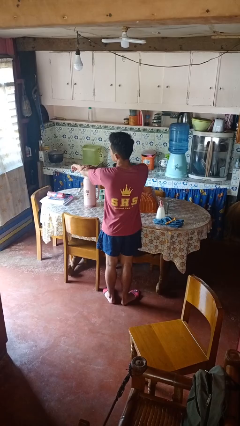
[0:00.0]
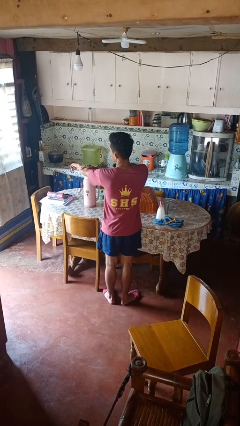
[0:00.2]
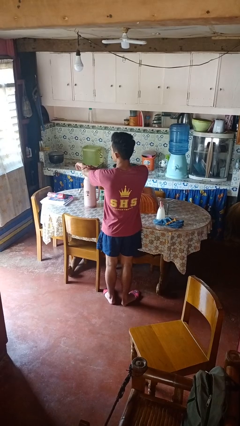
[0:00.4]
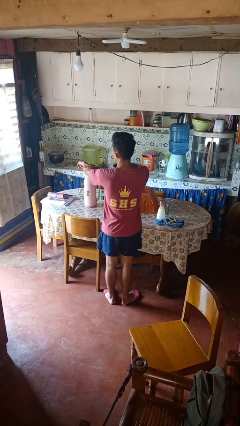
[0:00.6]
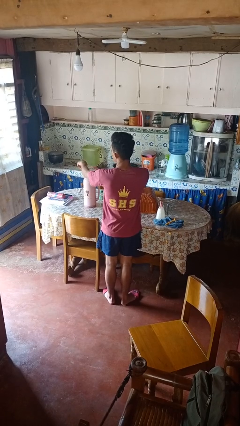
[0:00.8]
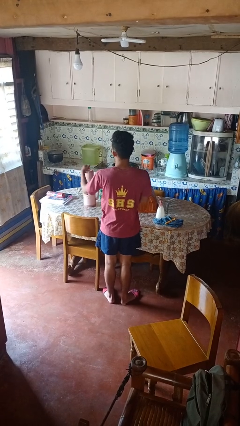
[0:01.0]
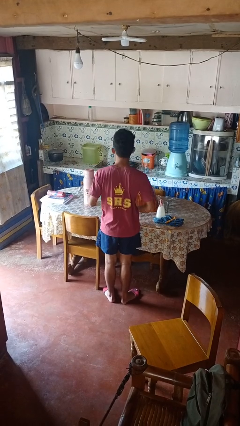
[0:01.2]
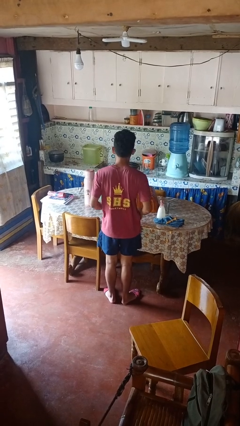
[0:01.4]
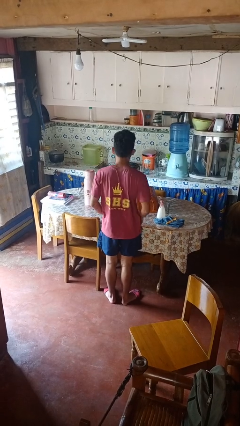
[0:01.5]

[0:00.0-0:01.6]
person swats bug

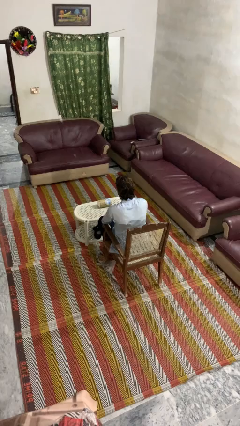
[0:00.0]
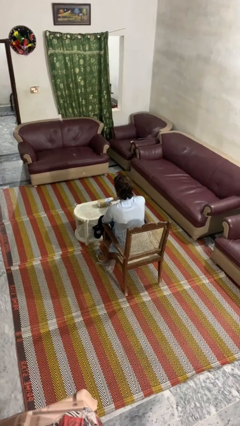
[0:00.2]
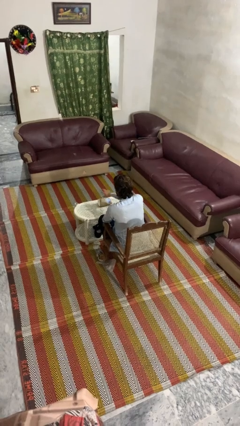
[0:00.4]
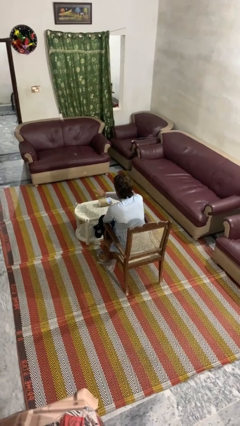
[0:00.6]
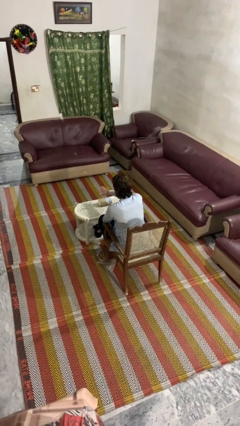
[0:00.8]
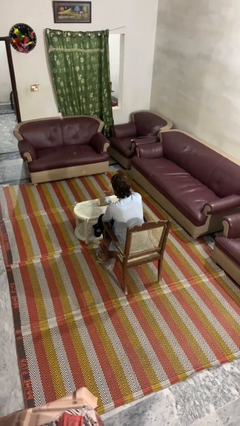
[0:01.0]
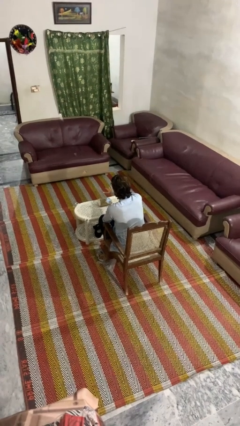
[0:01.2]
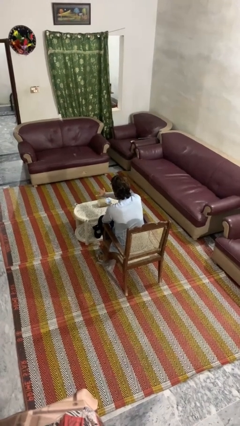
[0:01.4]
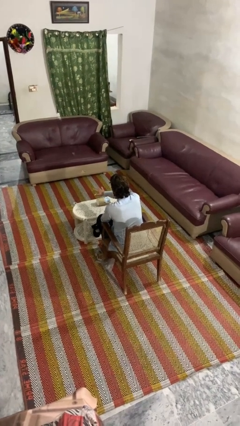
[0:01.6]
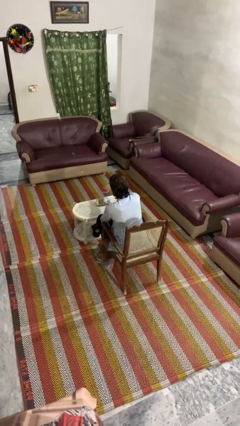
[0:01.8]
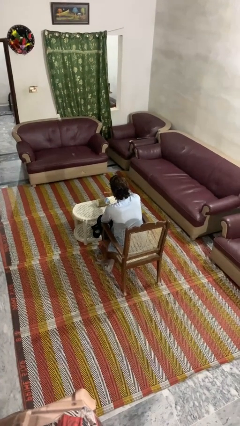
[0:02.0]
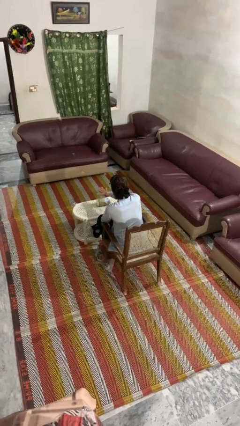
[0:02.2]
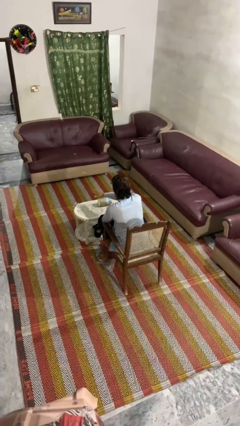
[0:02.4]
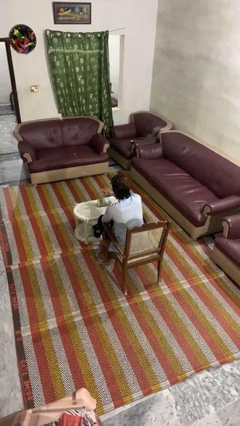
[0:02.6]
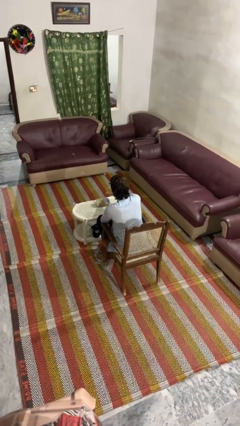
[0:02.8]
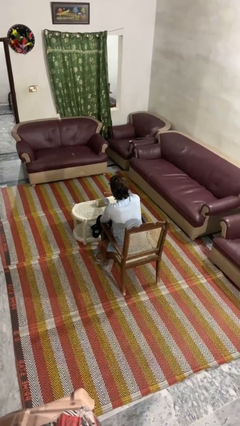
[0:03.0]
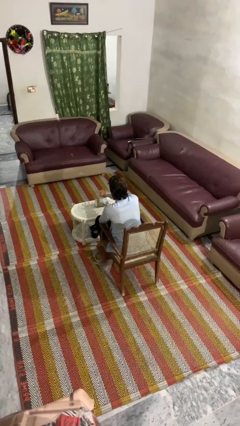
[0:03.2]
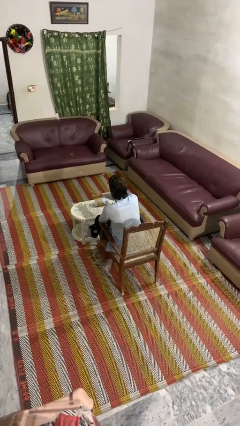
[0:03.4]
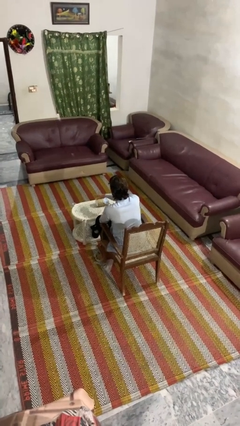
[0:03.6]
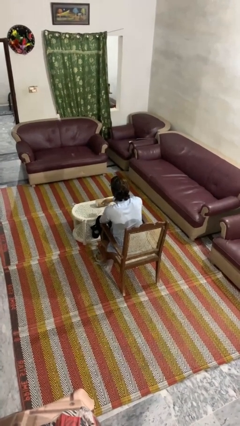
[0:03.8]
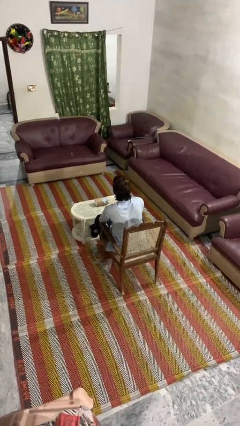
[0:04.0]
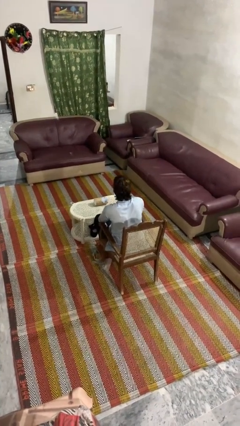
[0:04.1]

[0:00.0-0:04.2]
person waves hand over object

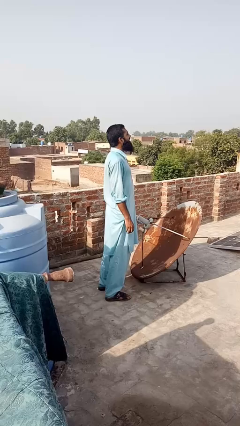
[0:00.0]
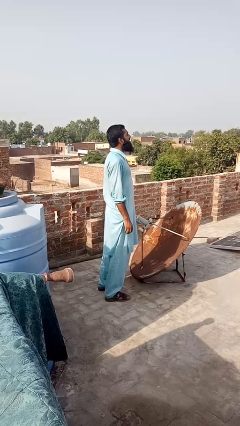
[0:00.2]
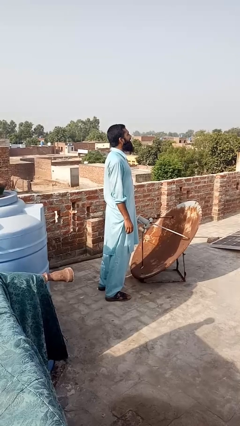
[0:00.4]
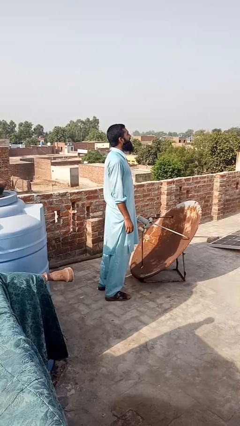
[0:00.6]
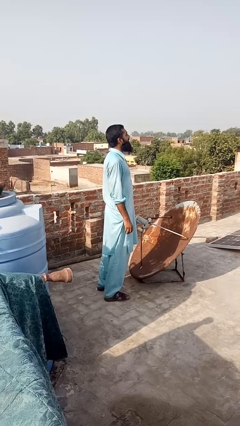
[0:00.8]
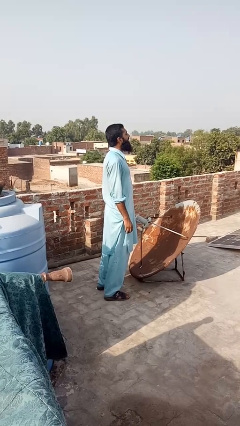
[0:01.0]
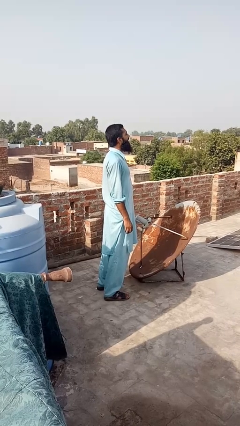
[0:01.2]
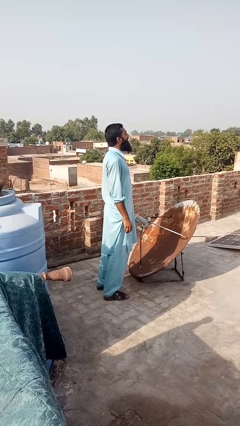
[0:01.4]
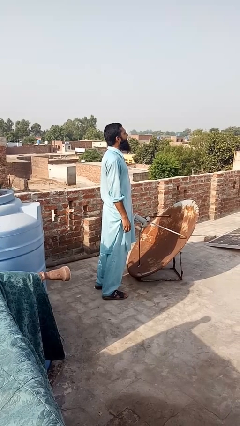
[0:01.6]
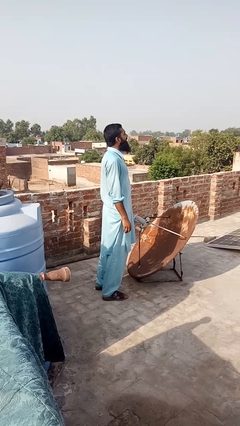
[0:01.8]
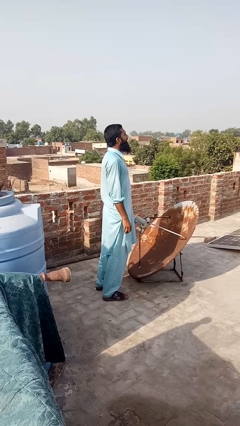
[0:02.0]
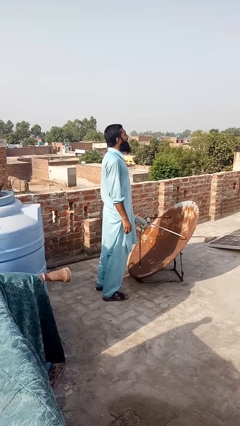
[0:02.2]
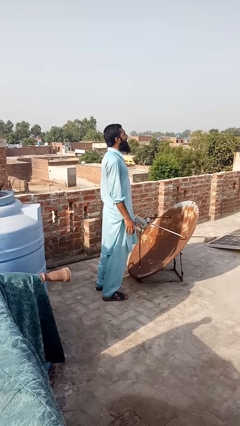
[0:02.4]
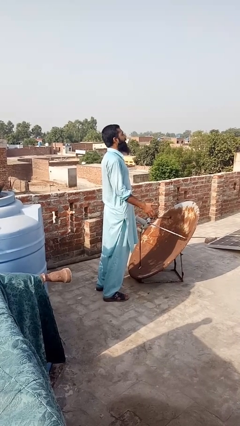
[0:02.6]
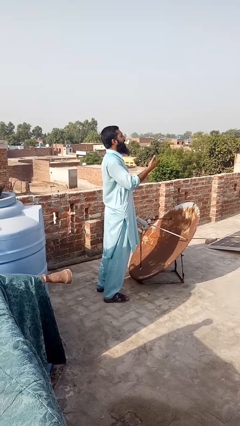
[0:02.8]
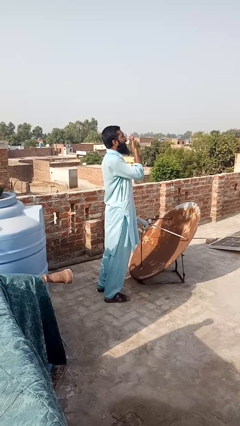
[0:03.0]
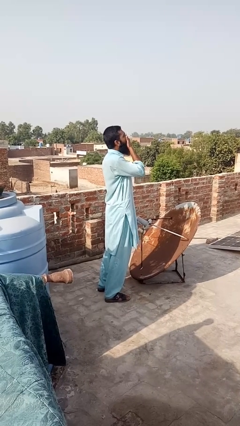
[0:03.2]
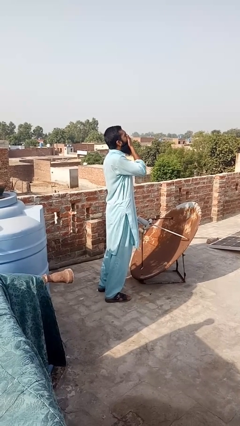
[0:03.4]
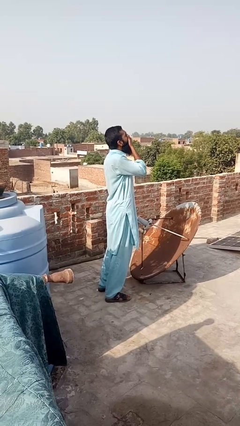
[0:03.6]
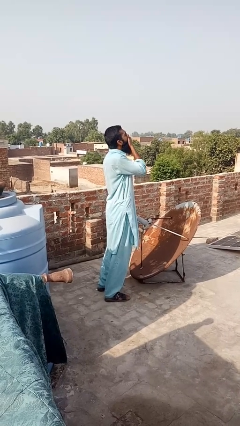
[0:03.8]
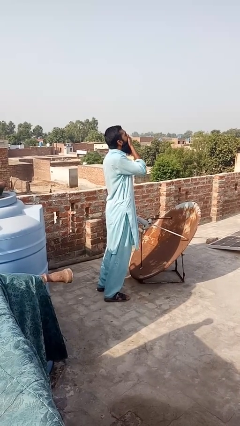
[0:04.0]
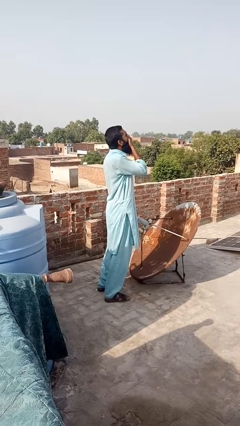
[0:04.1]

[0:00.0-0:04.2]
person covers face with hands

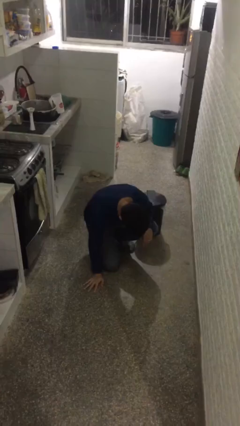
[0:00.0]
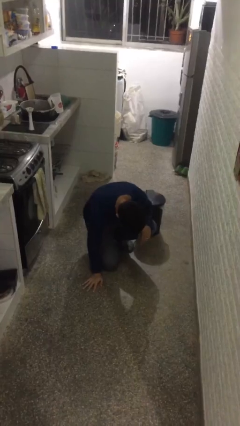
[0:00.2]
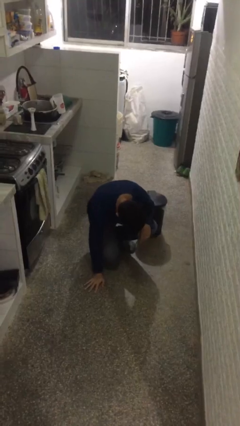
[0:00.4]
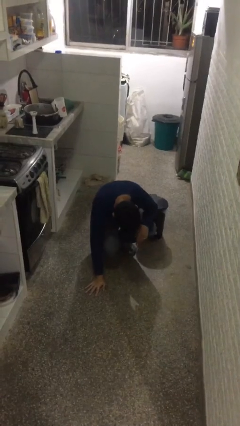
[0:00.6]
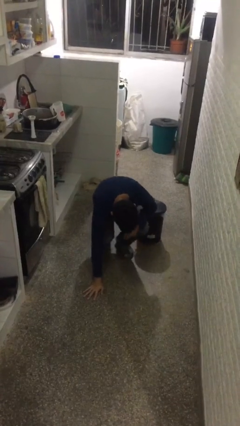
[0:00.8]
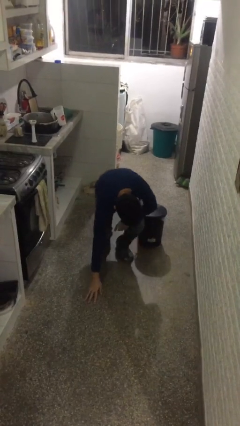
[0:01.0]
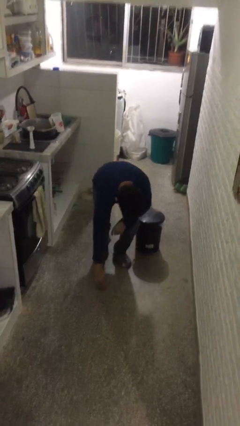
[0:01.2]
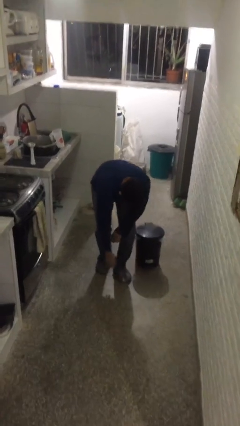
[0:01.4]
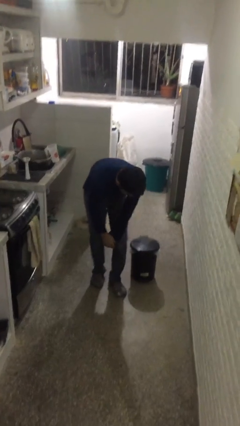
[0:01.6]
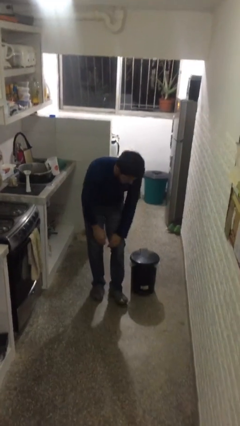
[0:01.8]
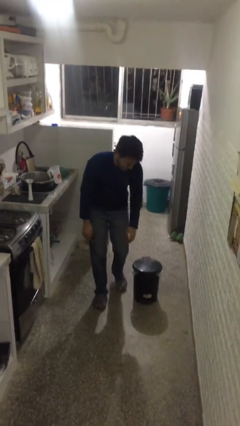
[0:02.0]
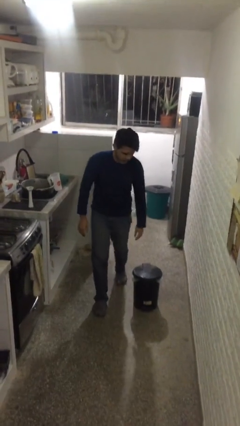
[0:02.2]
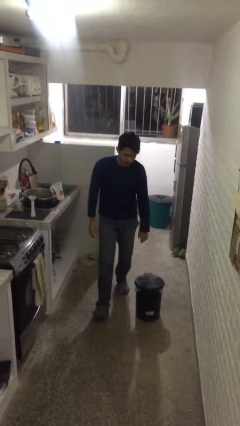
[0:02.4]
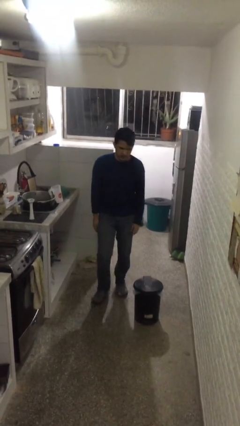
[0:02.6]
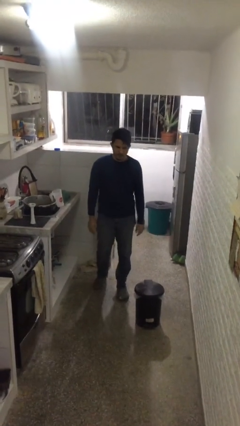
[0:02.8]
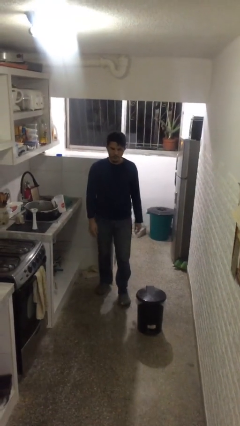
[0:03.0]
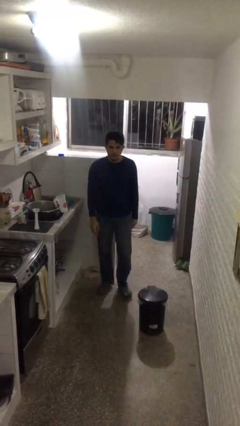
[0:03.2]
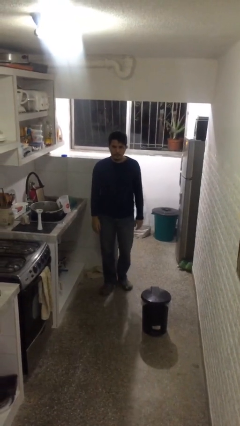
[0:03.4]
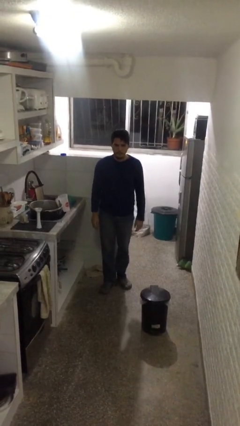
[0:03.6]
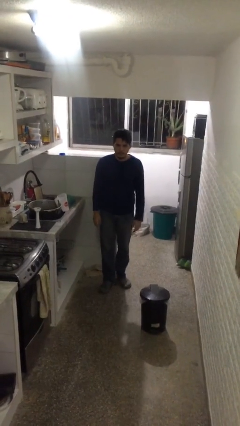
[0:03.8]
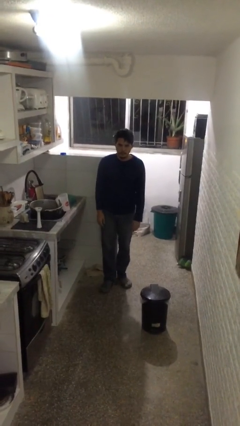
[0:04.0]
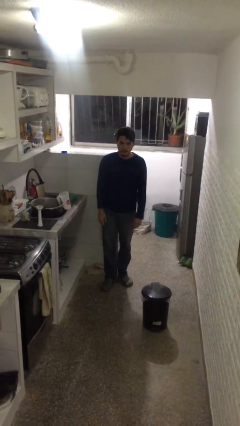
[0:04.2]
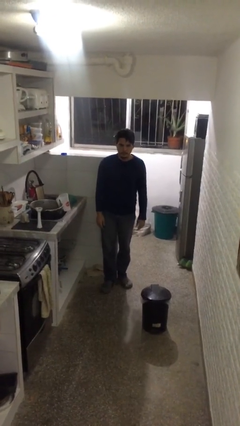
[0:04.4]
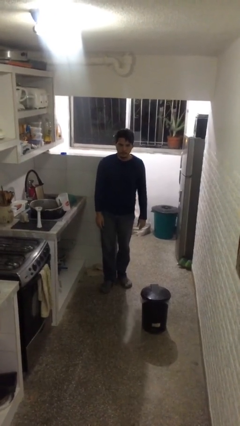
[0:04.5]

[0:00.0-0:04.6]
person stands up from floor

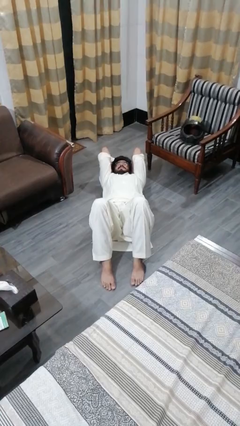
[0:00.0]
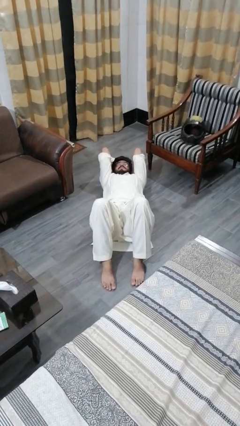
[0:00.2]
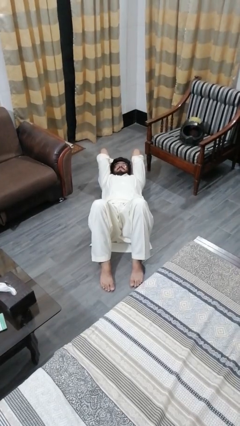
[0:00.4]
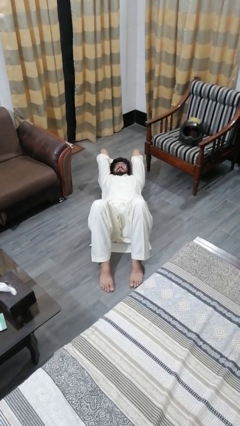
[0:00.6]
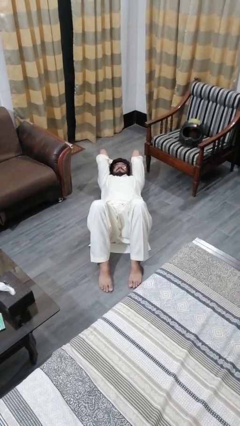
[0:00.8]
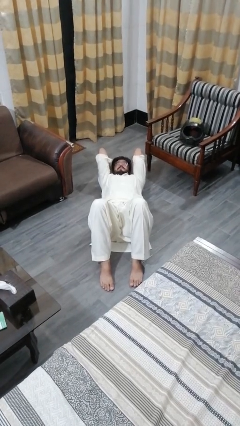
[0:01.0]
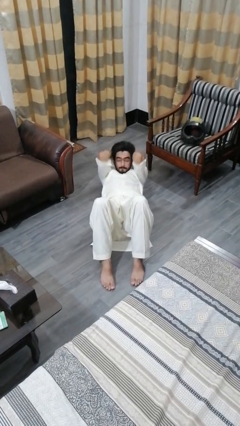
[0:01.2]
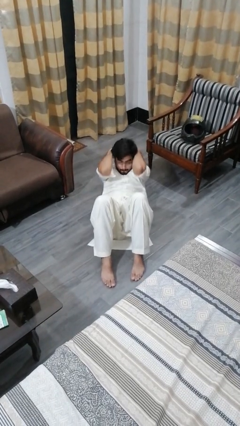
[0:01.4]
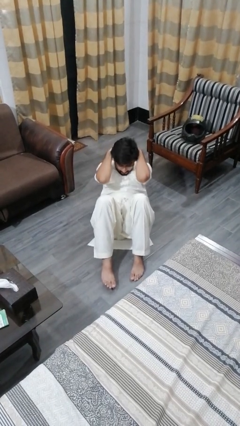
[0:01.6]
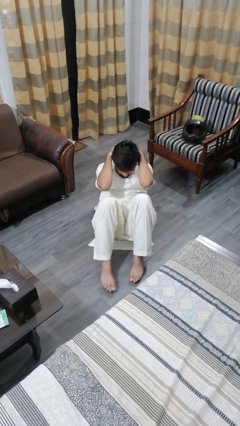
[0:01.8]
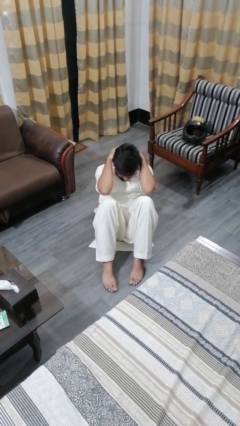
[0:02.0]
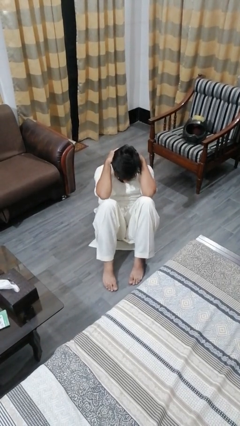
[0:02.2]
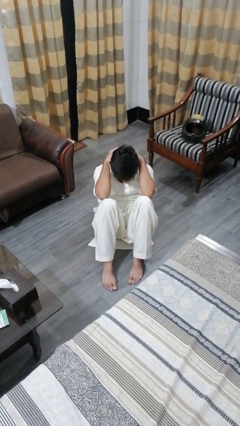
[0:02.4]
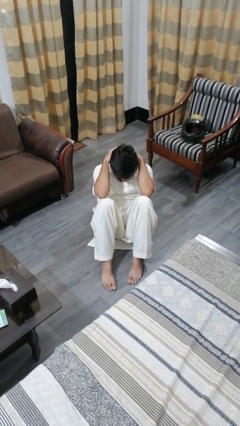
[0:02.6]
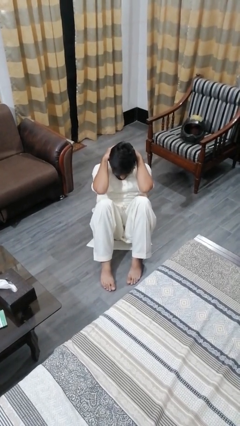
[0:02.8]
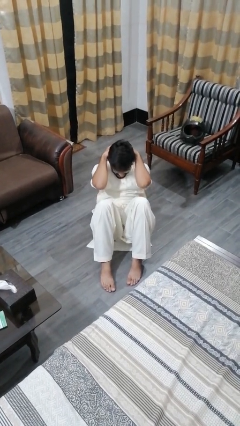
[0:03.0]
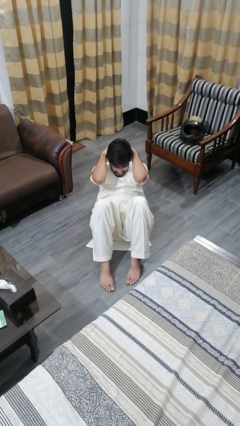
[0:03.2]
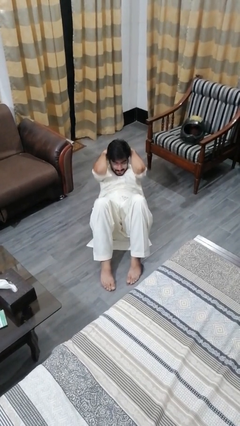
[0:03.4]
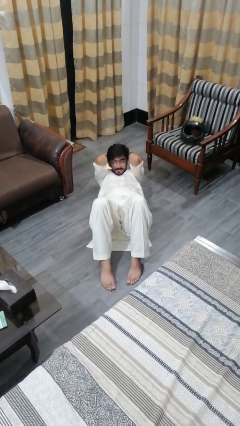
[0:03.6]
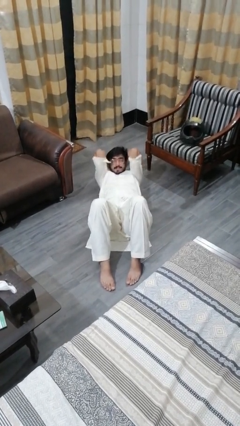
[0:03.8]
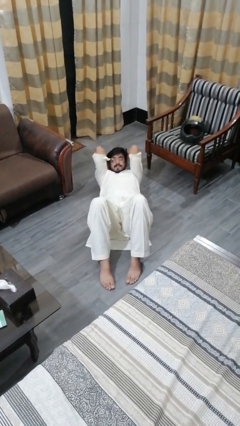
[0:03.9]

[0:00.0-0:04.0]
person exercises with situp
